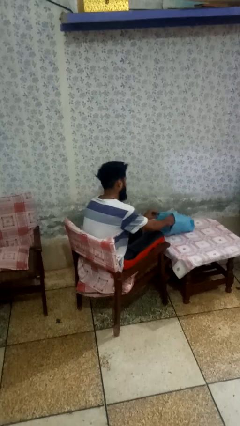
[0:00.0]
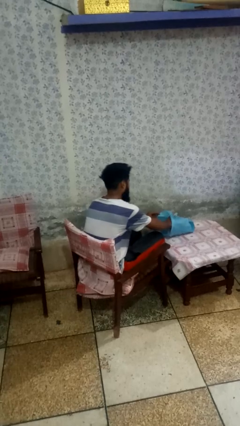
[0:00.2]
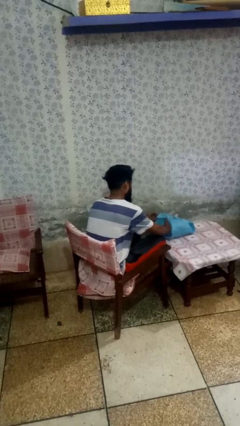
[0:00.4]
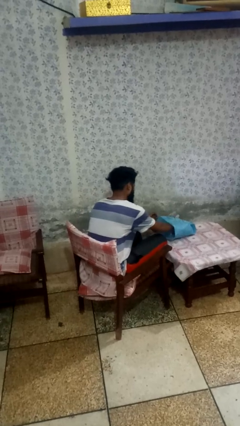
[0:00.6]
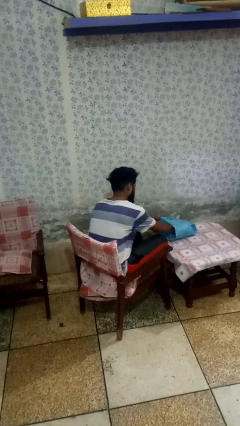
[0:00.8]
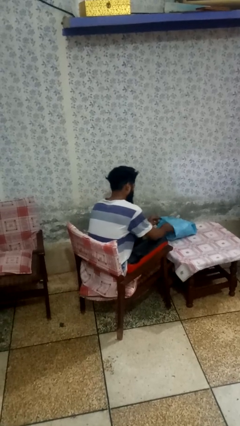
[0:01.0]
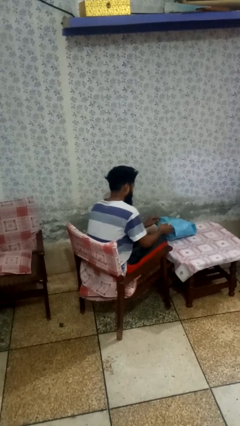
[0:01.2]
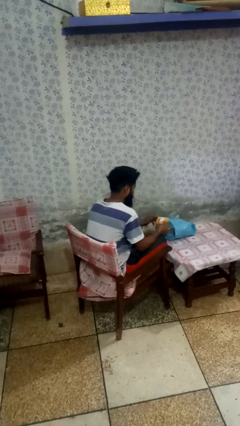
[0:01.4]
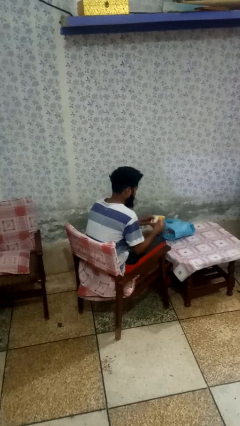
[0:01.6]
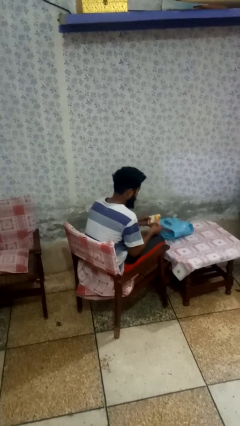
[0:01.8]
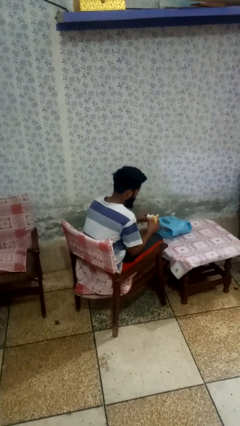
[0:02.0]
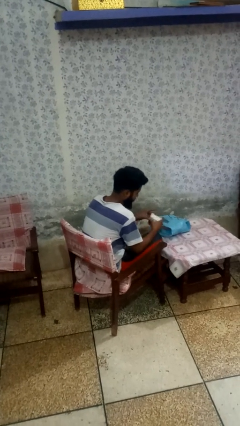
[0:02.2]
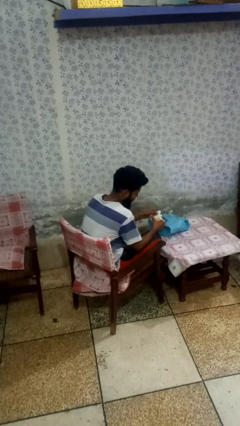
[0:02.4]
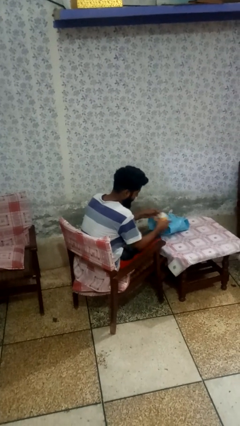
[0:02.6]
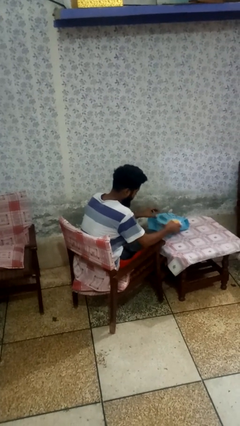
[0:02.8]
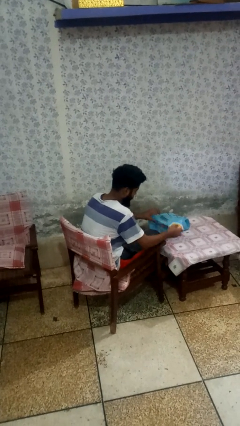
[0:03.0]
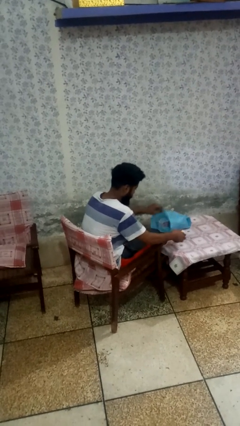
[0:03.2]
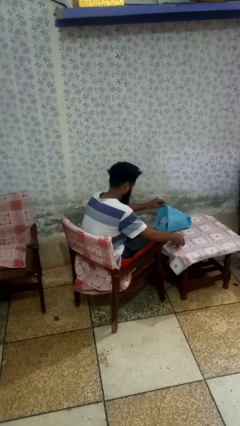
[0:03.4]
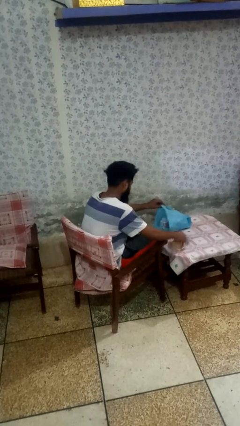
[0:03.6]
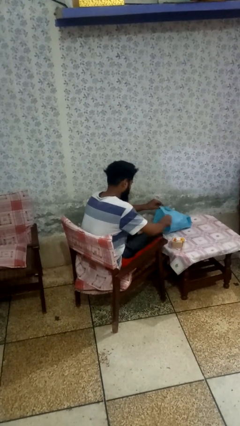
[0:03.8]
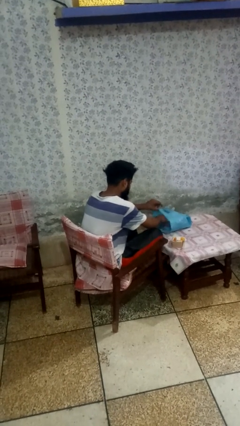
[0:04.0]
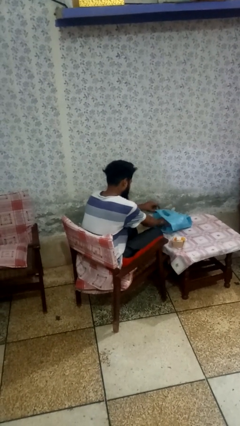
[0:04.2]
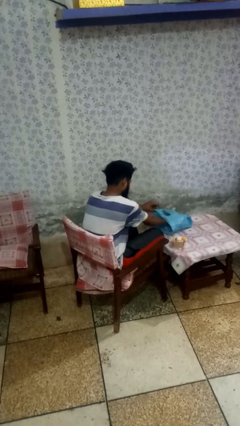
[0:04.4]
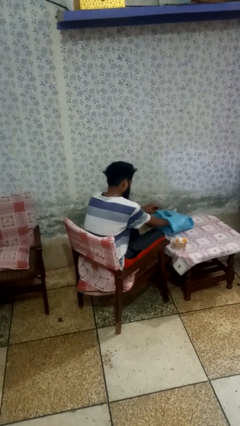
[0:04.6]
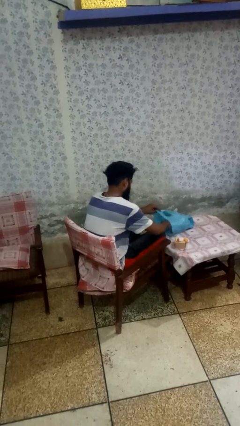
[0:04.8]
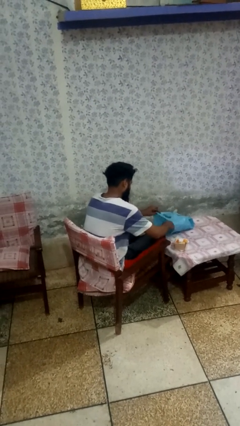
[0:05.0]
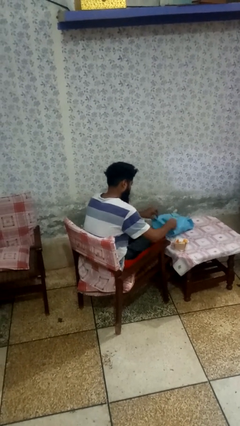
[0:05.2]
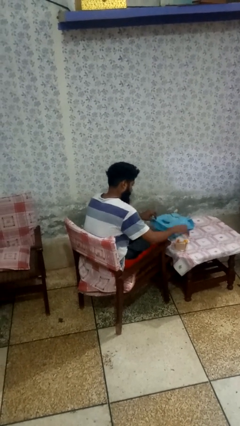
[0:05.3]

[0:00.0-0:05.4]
person takes object from bag

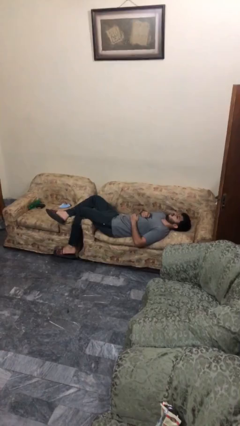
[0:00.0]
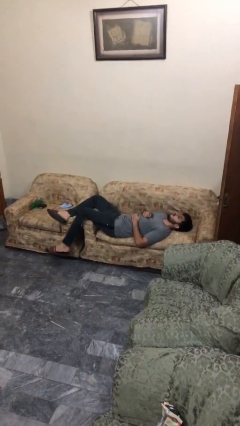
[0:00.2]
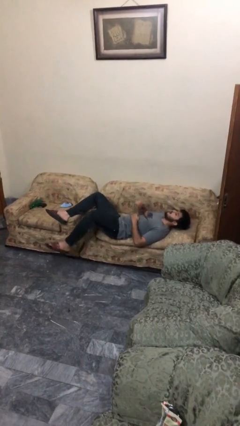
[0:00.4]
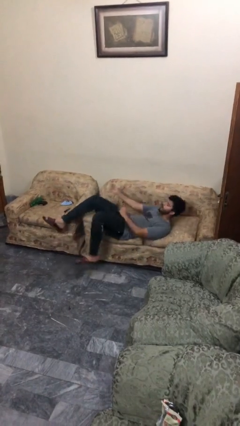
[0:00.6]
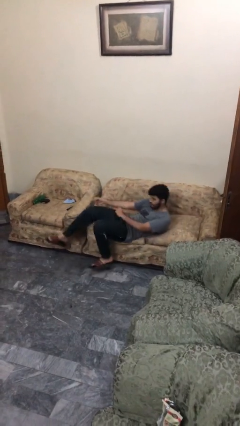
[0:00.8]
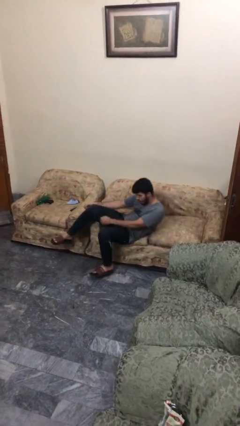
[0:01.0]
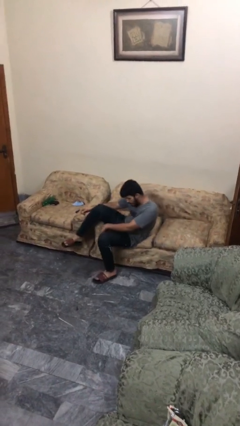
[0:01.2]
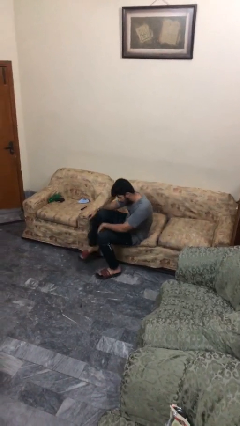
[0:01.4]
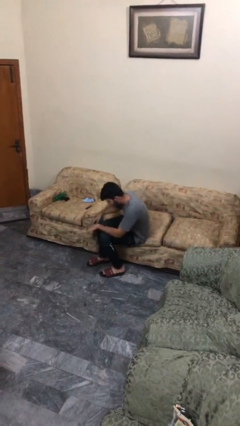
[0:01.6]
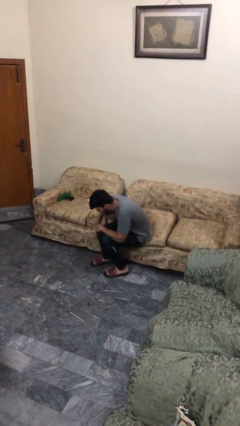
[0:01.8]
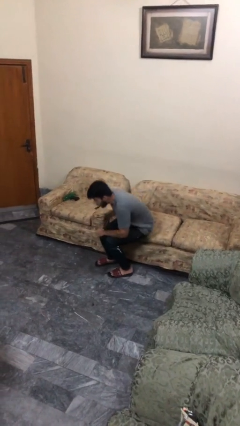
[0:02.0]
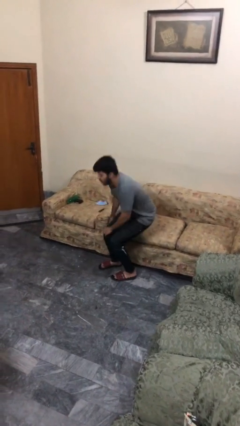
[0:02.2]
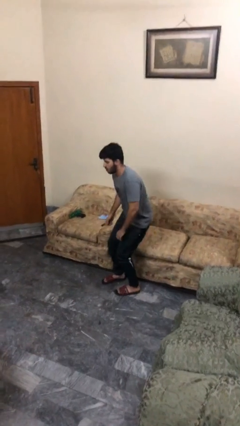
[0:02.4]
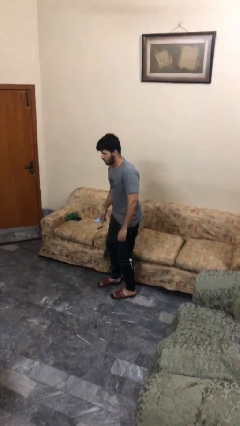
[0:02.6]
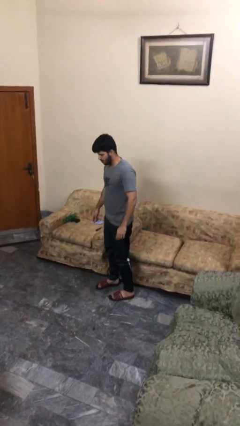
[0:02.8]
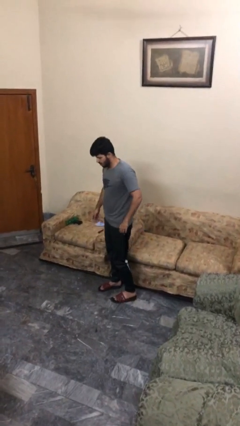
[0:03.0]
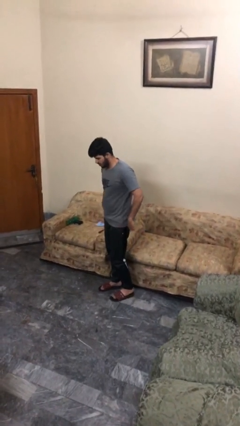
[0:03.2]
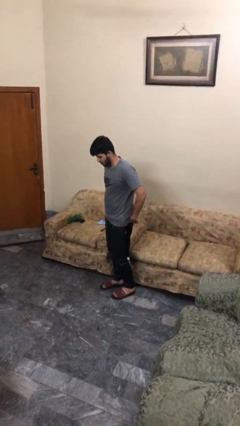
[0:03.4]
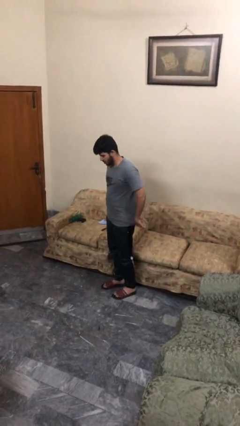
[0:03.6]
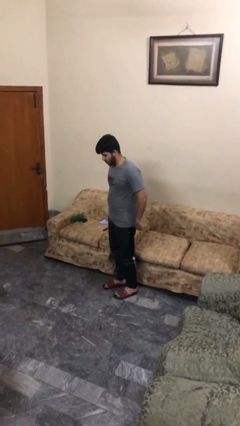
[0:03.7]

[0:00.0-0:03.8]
person stands up

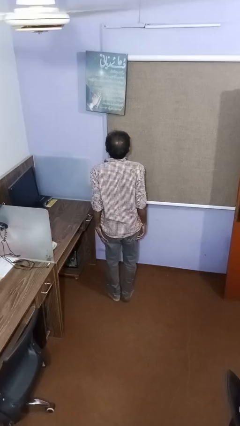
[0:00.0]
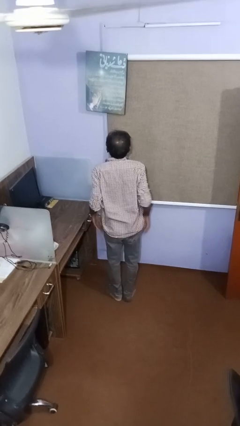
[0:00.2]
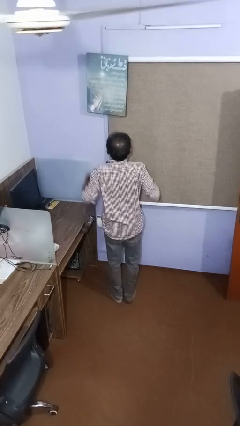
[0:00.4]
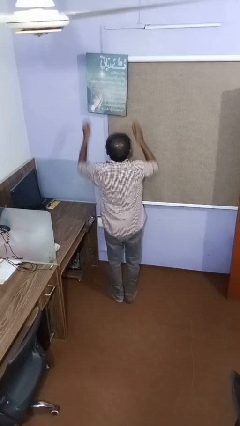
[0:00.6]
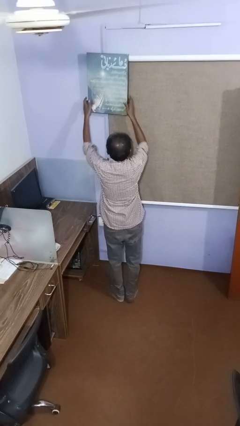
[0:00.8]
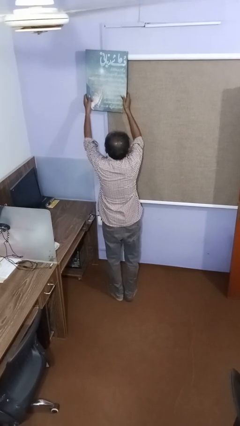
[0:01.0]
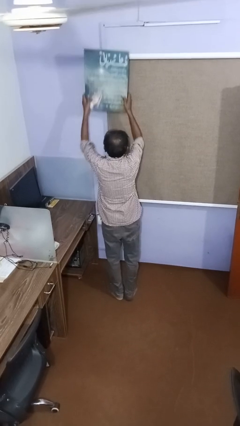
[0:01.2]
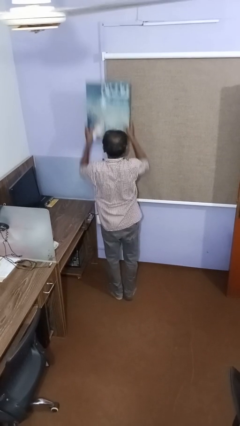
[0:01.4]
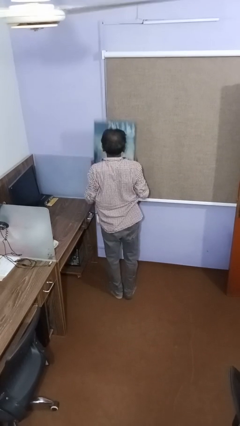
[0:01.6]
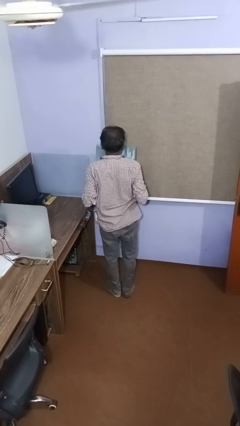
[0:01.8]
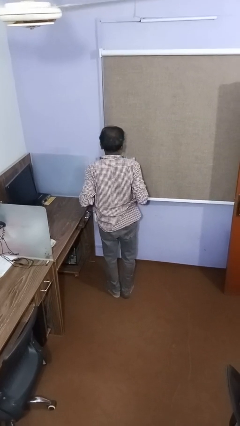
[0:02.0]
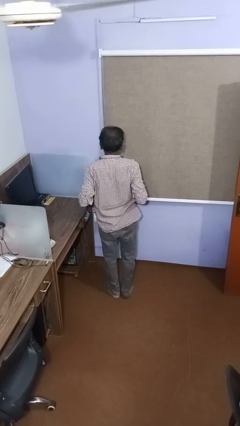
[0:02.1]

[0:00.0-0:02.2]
person takes down picture frame

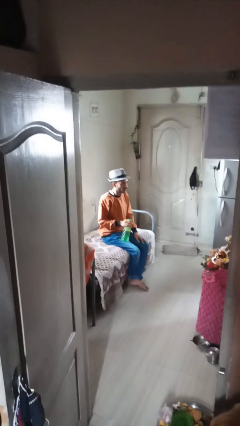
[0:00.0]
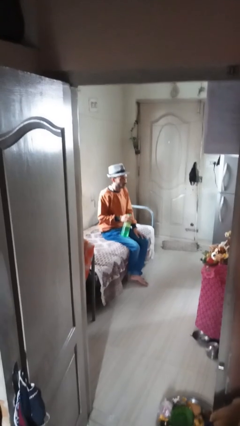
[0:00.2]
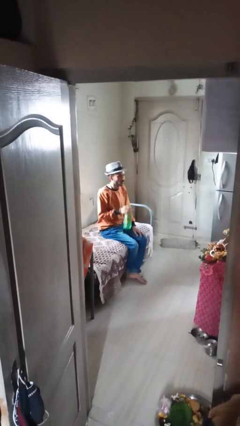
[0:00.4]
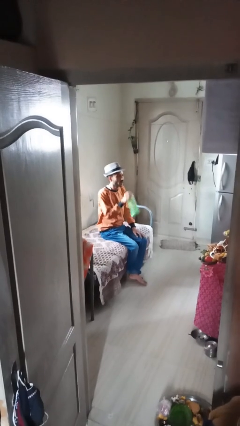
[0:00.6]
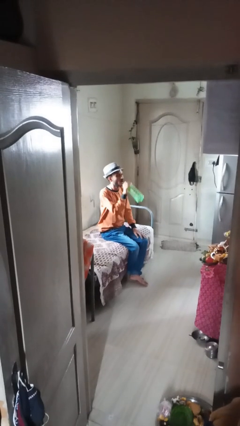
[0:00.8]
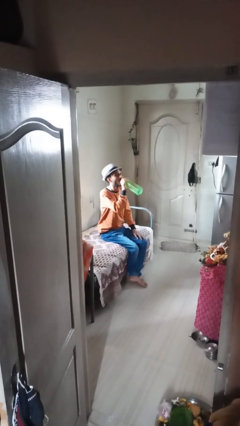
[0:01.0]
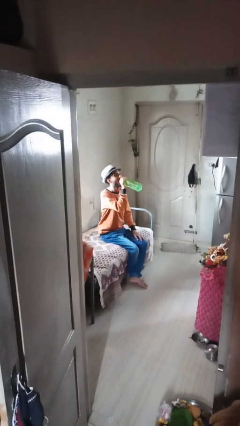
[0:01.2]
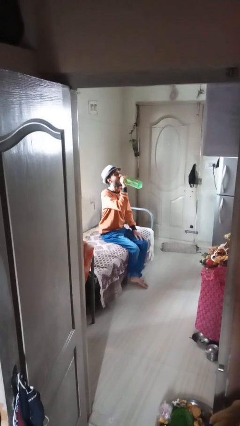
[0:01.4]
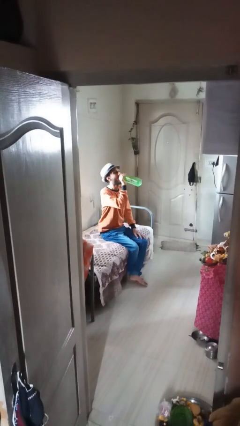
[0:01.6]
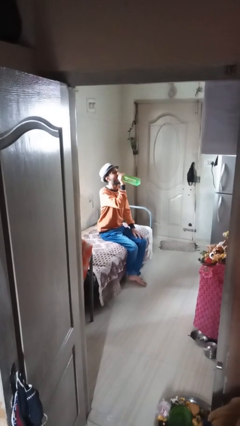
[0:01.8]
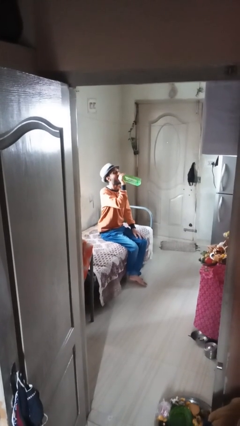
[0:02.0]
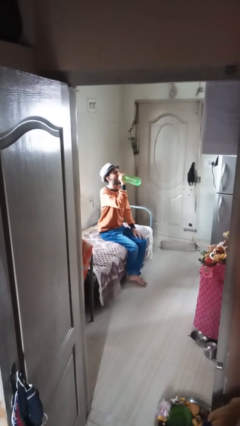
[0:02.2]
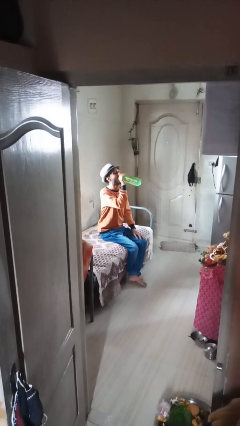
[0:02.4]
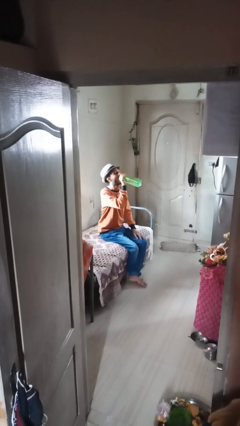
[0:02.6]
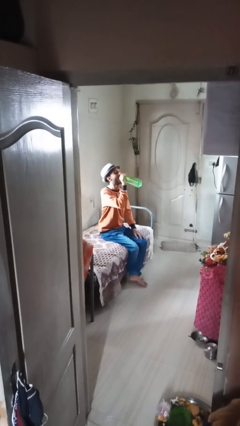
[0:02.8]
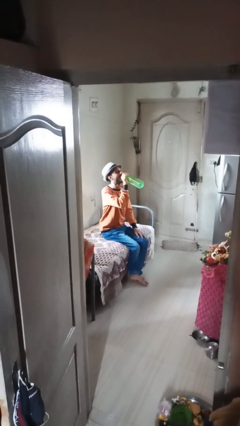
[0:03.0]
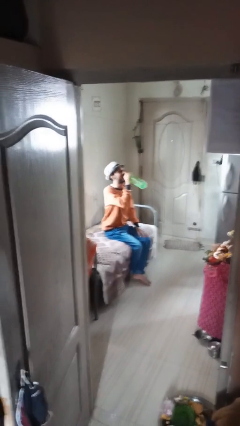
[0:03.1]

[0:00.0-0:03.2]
person drinks from bottle

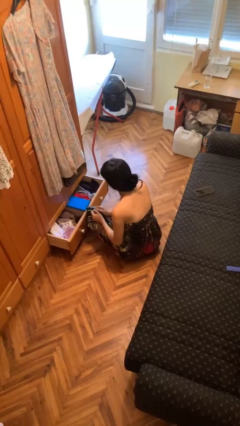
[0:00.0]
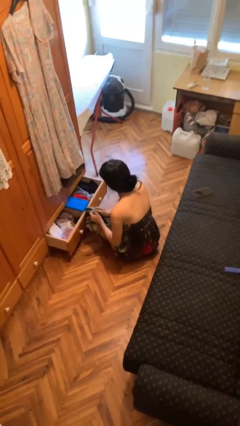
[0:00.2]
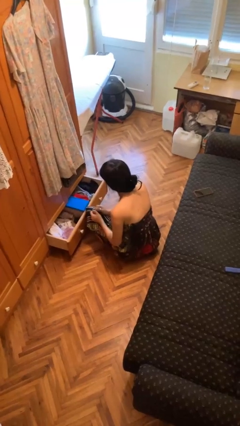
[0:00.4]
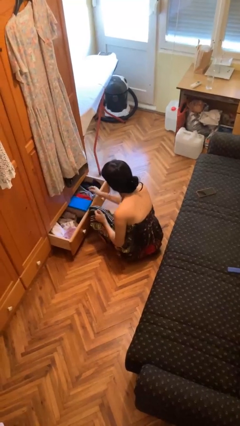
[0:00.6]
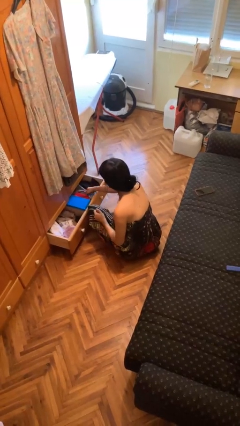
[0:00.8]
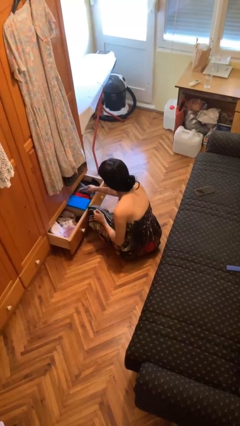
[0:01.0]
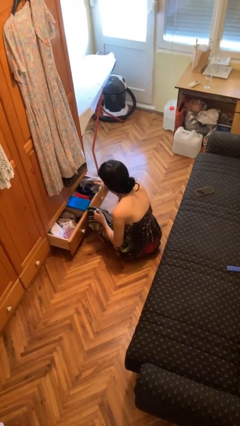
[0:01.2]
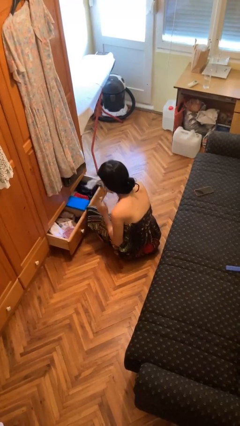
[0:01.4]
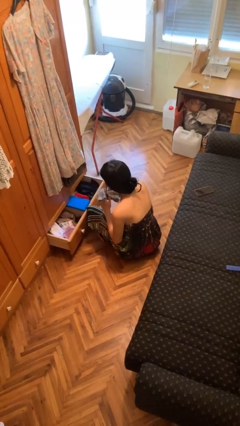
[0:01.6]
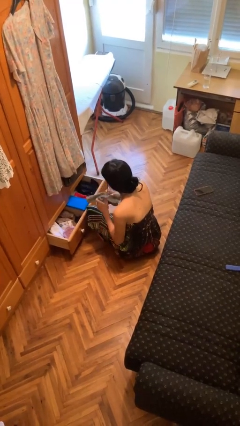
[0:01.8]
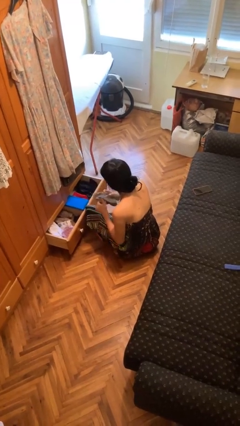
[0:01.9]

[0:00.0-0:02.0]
person takes clothes from dresser

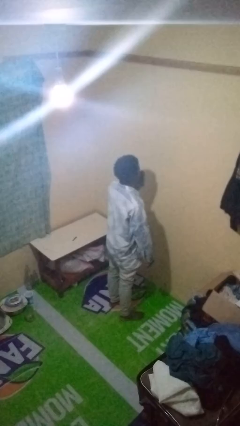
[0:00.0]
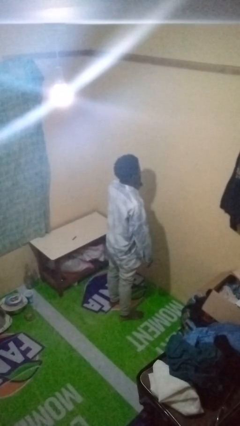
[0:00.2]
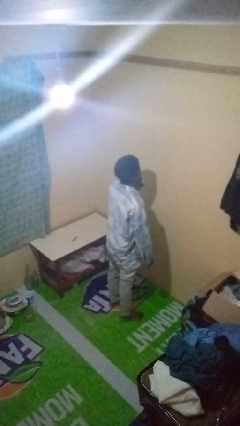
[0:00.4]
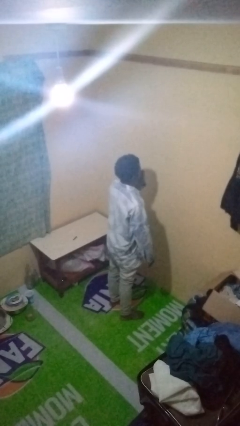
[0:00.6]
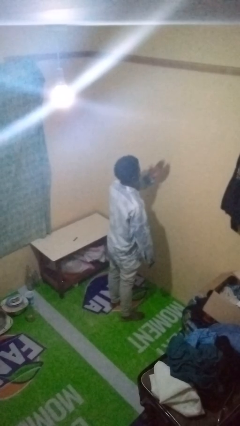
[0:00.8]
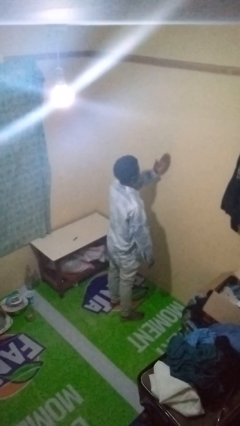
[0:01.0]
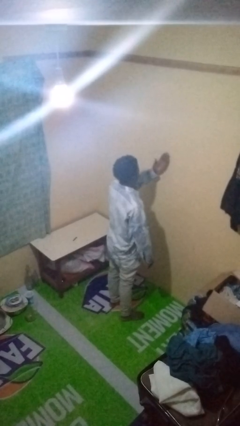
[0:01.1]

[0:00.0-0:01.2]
person gestures blow kiss
